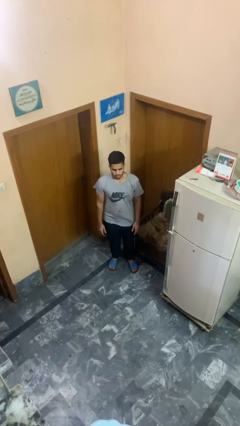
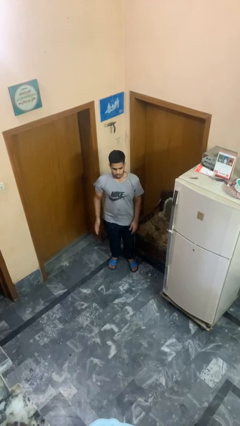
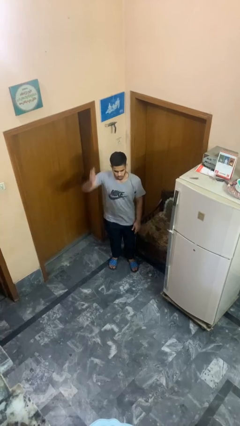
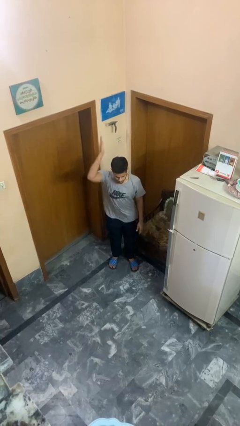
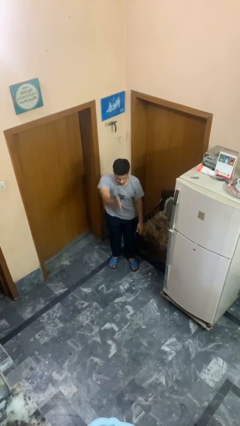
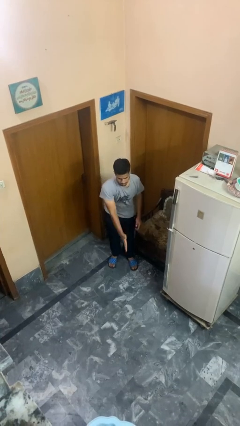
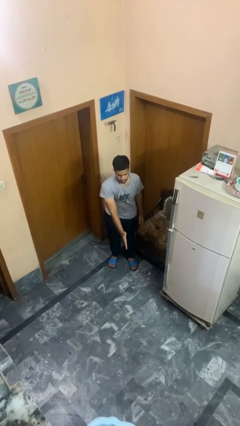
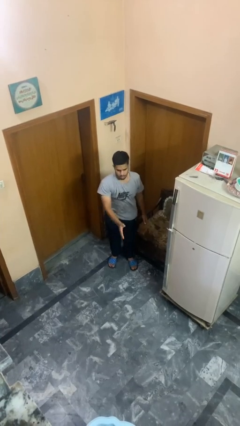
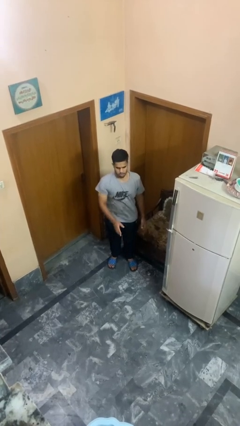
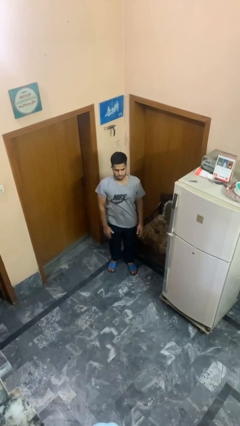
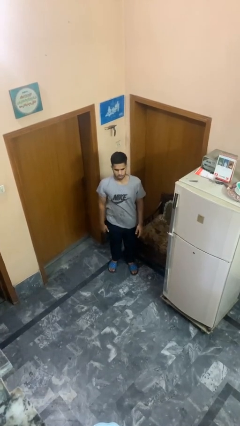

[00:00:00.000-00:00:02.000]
person karate chop

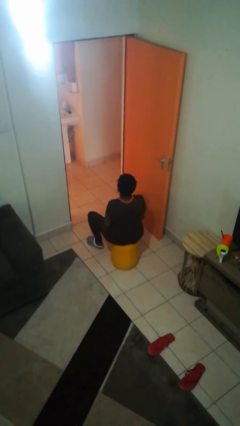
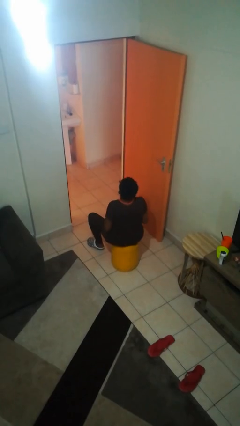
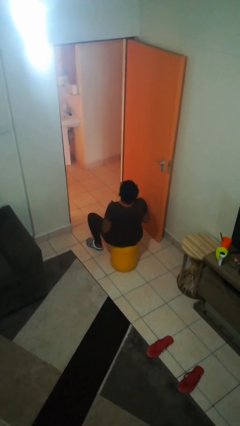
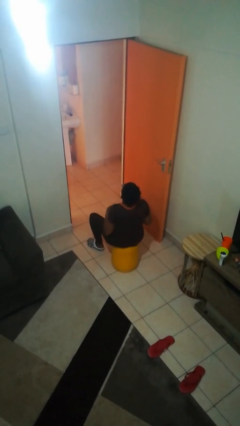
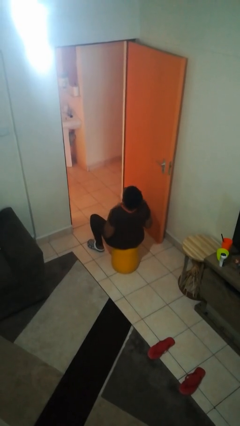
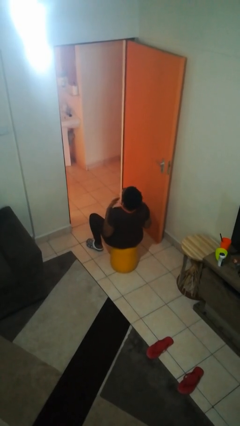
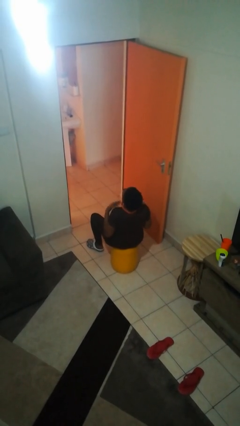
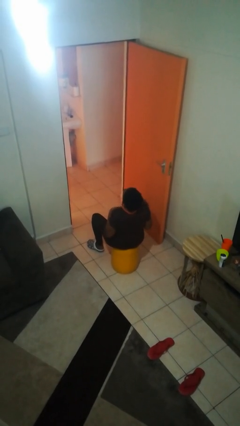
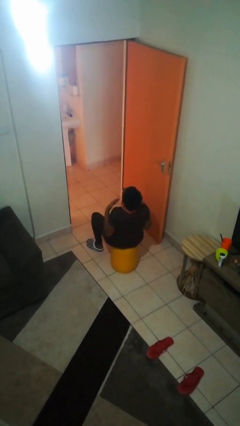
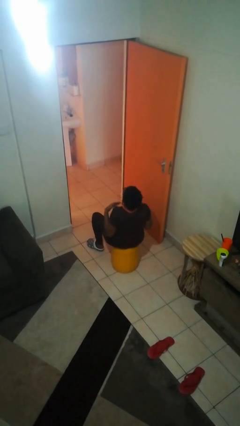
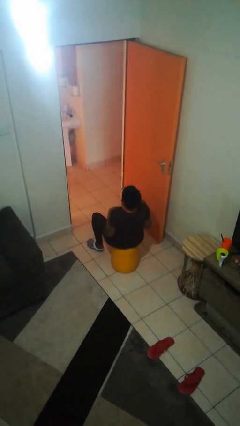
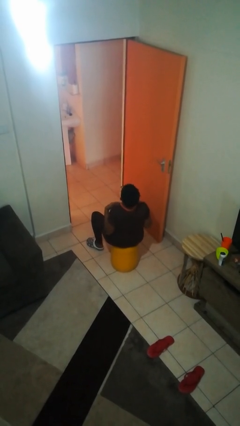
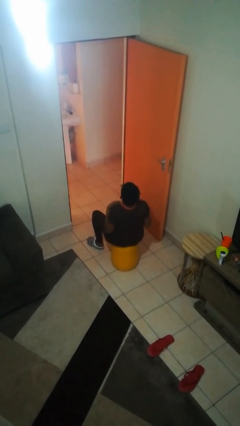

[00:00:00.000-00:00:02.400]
person drums on chest

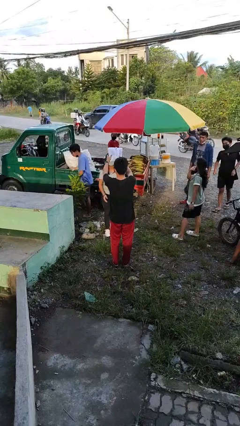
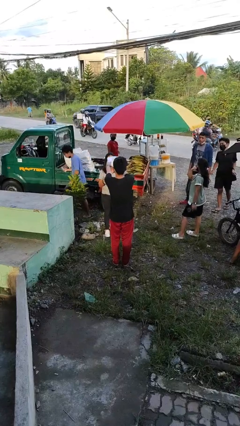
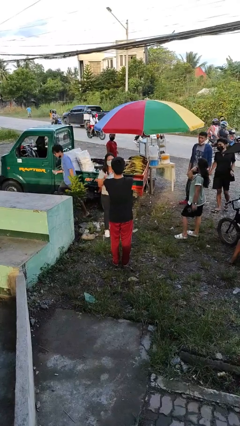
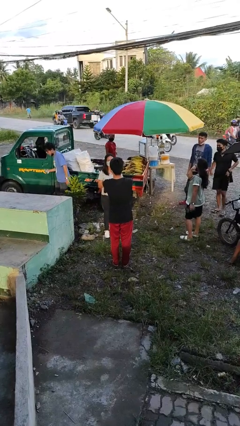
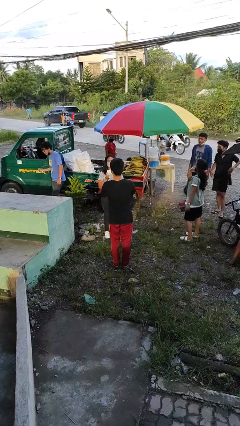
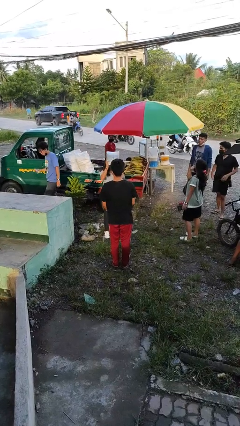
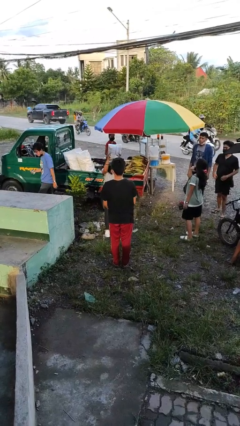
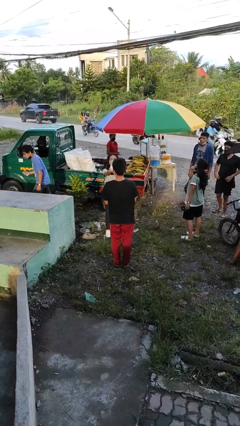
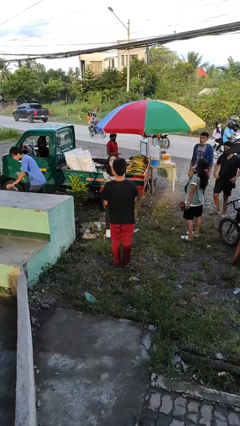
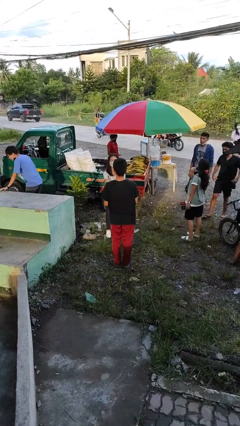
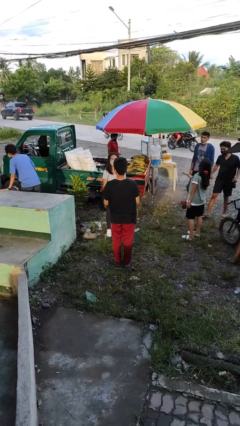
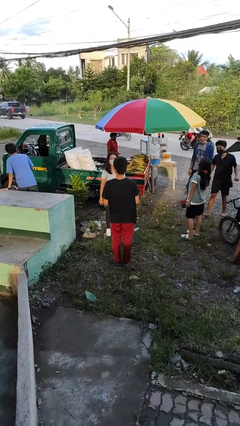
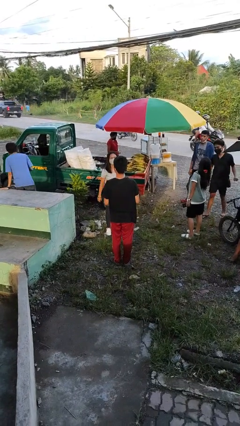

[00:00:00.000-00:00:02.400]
person transfers object to person

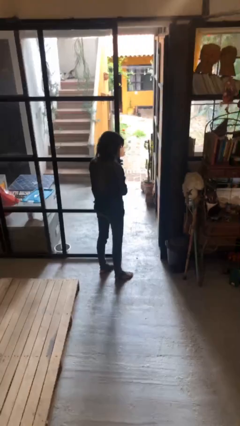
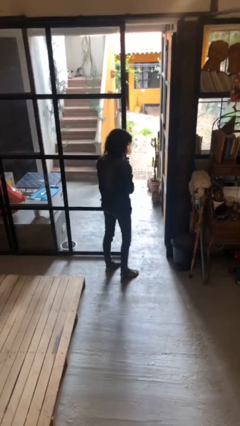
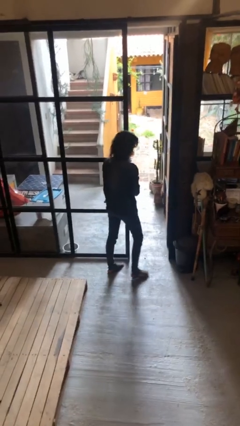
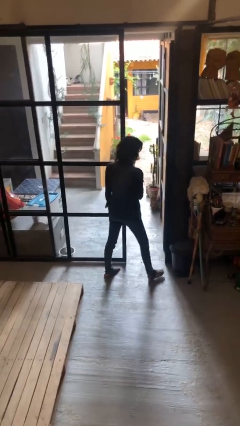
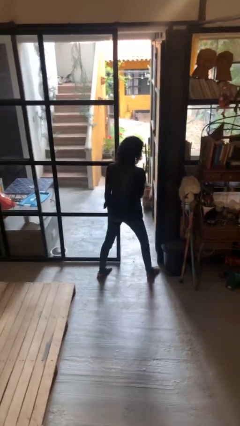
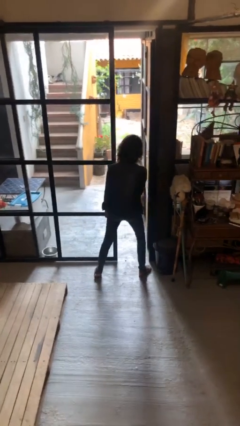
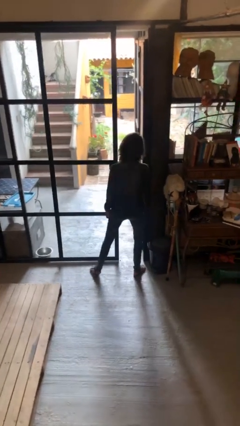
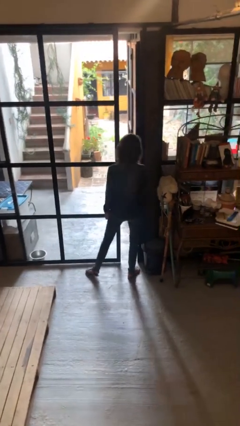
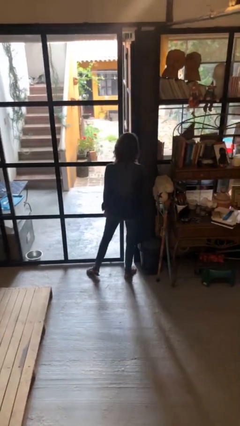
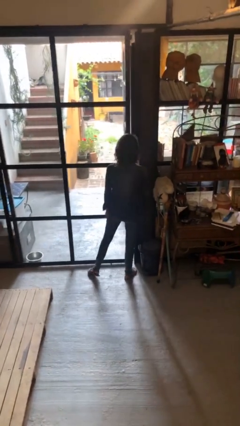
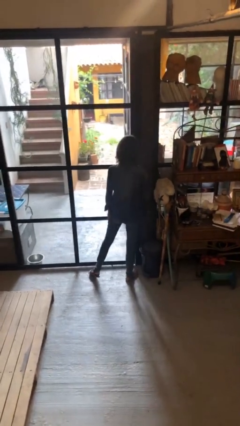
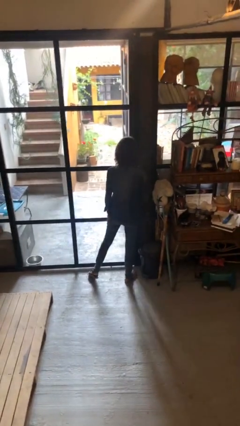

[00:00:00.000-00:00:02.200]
person closes sliding door

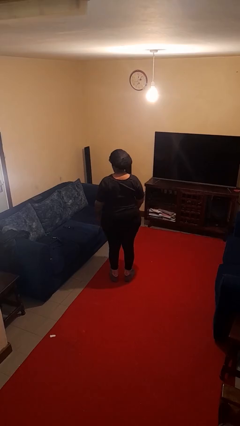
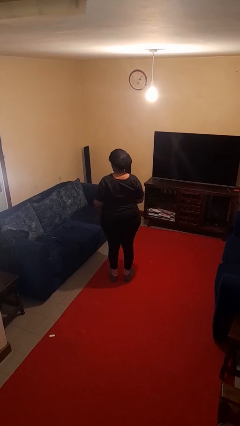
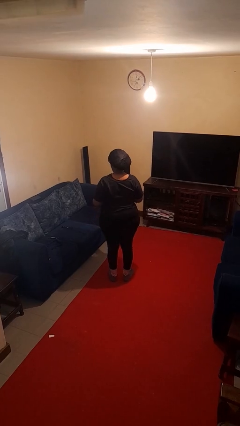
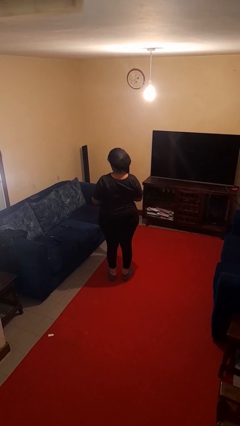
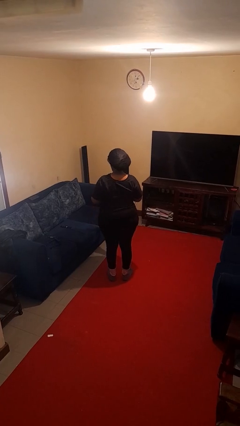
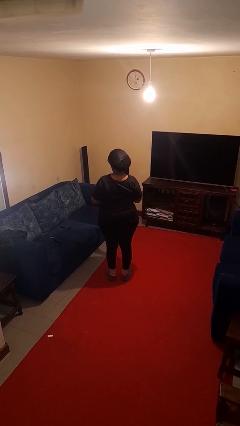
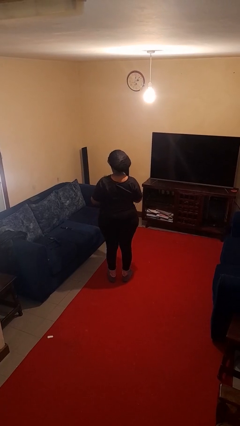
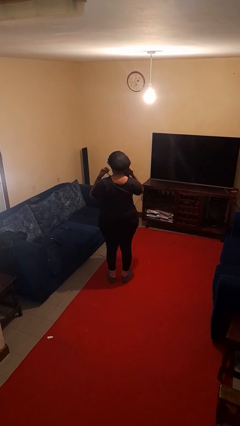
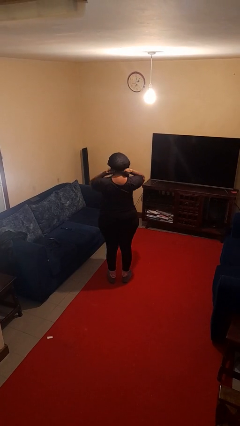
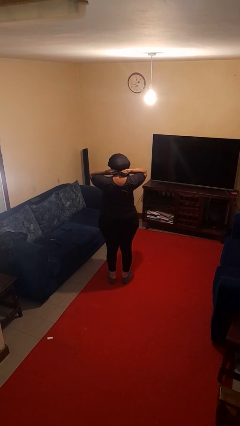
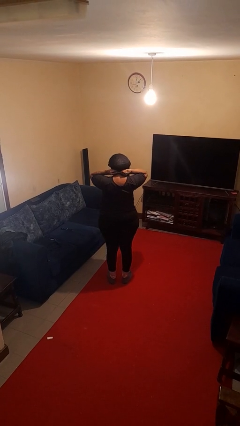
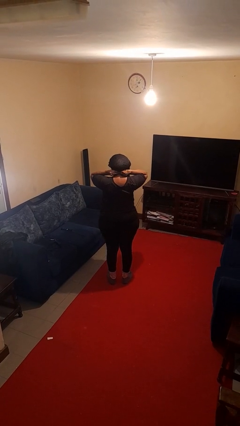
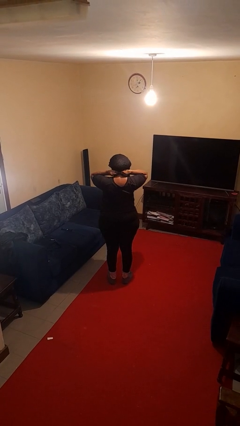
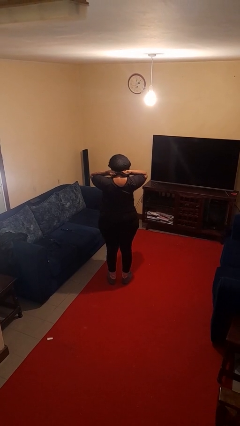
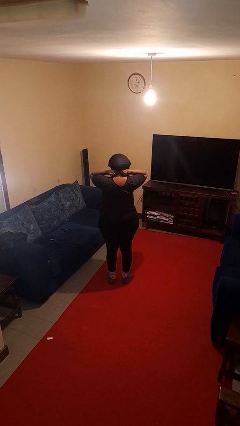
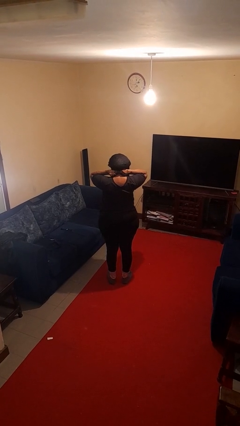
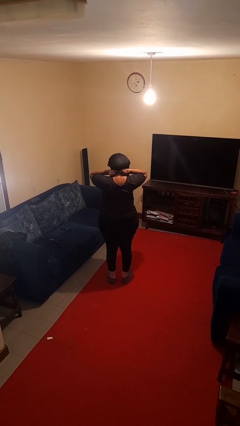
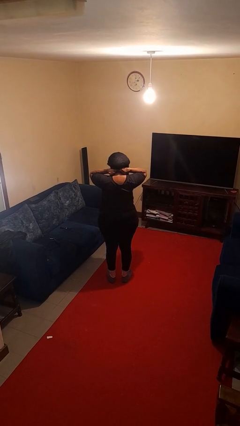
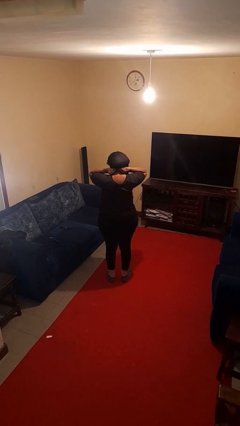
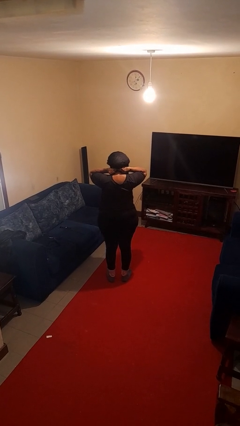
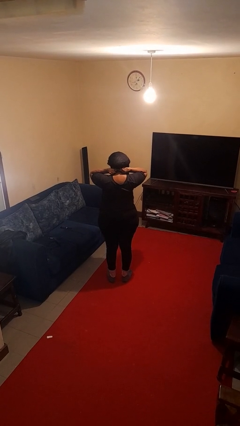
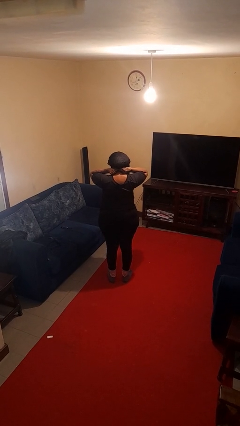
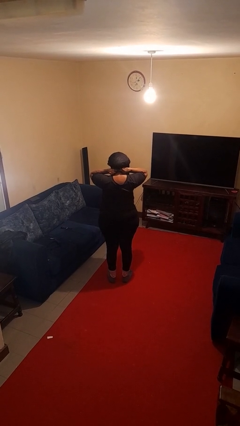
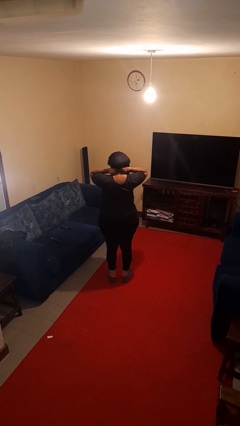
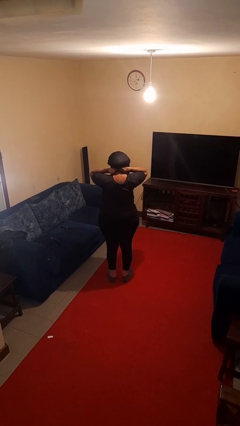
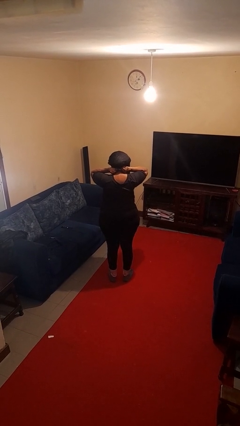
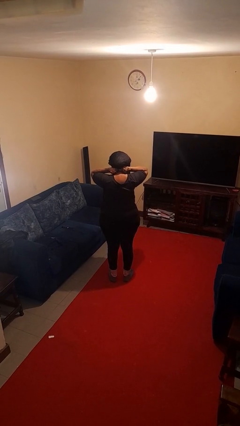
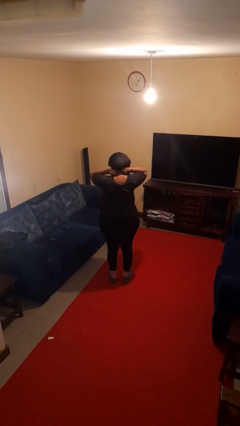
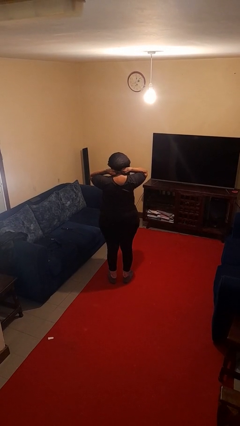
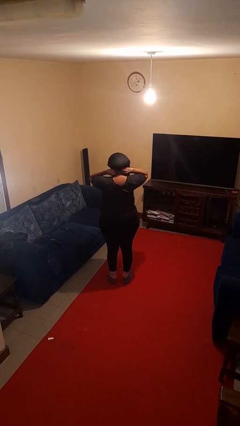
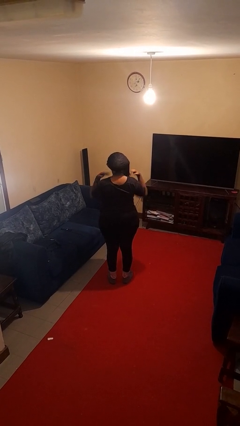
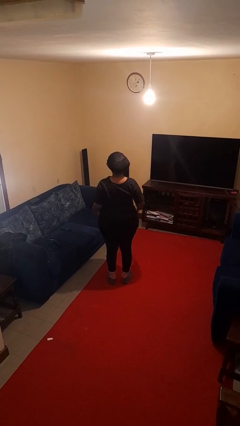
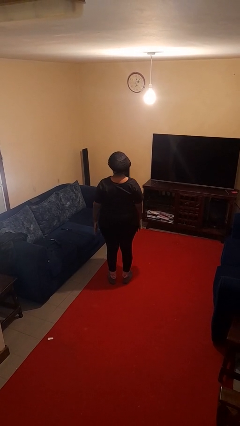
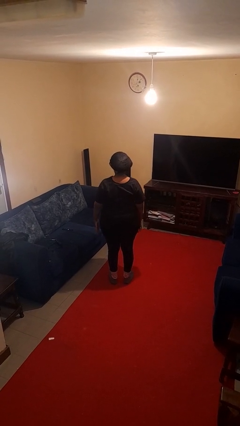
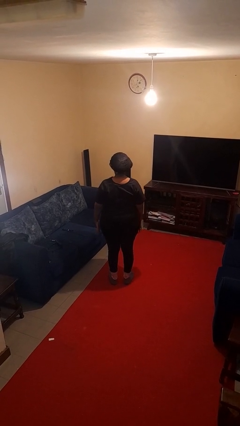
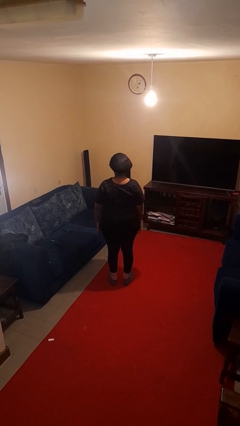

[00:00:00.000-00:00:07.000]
person puts on necklace

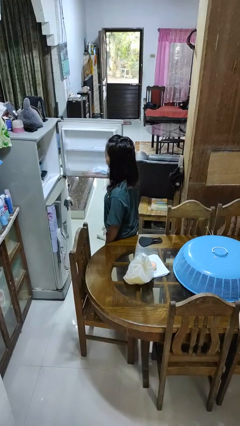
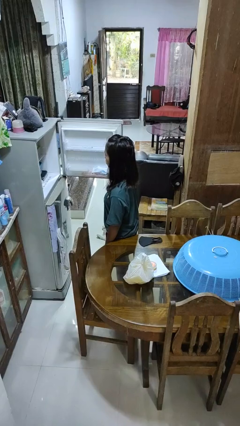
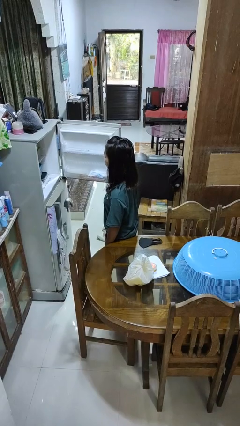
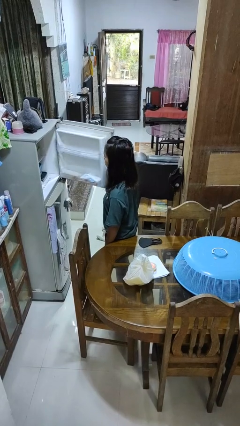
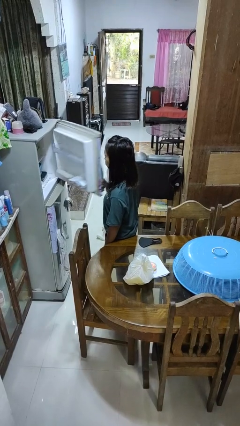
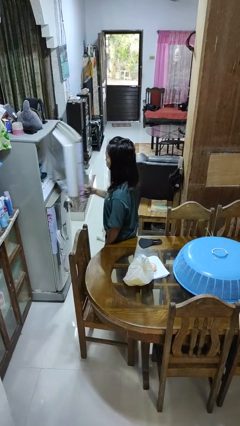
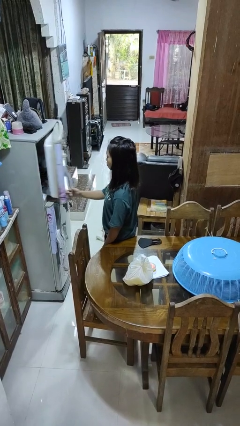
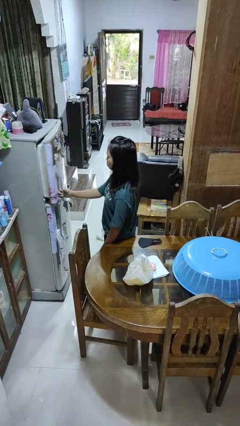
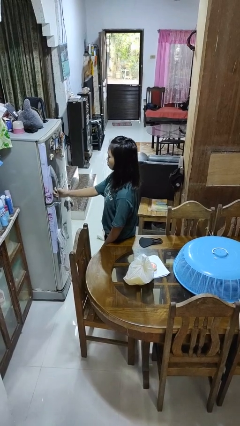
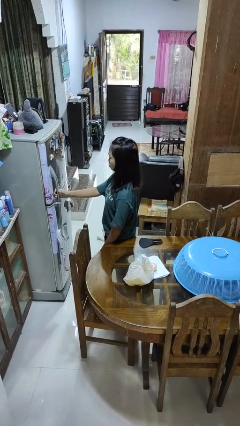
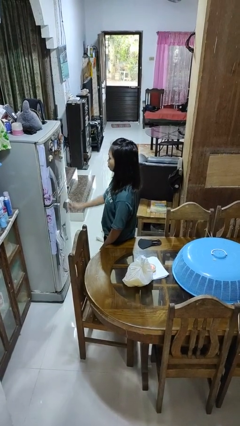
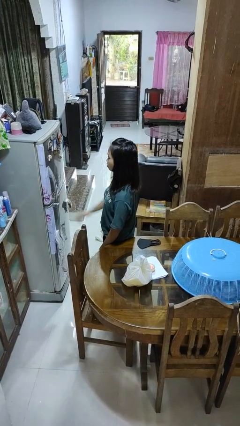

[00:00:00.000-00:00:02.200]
person closes refrigerator
